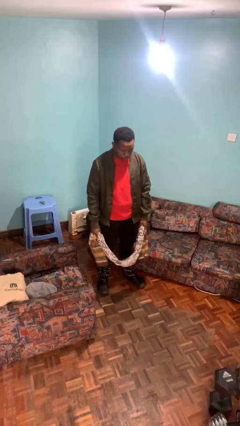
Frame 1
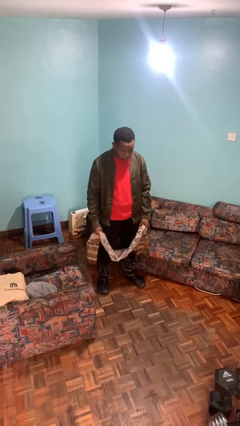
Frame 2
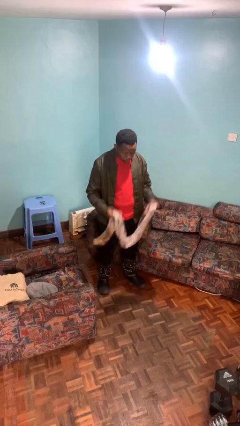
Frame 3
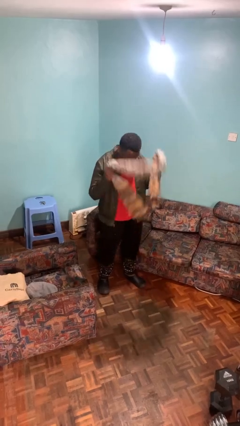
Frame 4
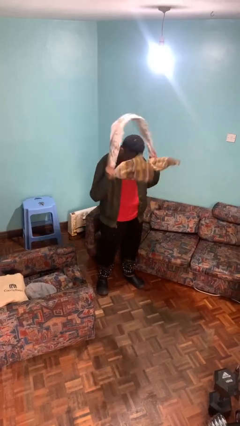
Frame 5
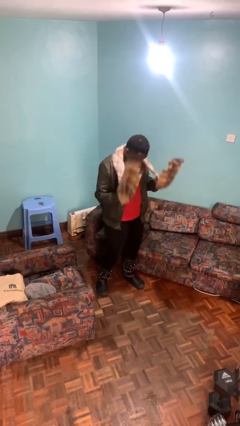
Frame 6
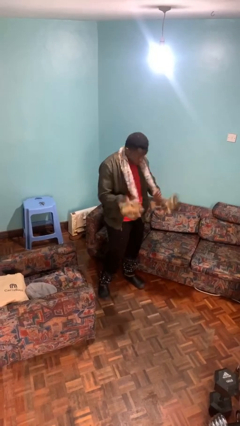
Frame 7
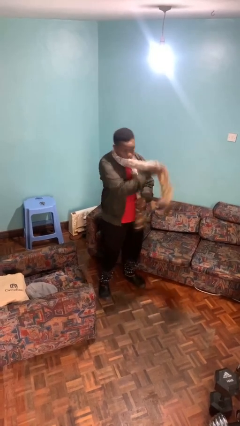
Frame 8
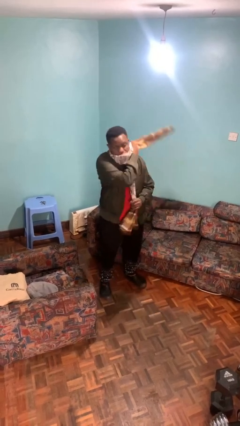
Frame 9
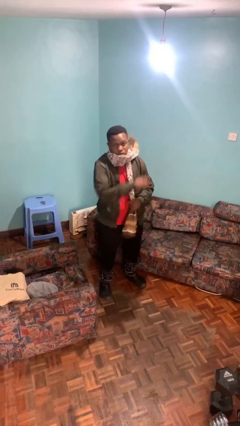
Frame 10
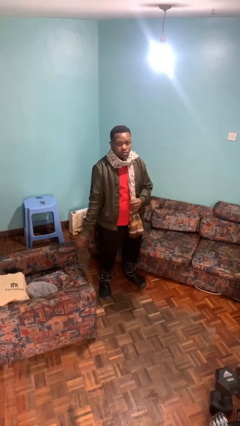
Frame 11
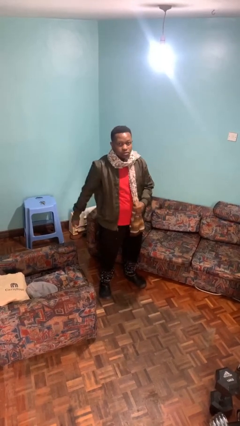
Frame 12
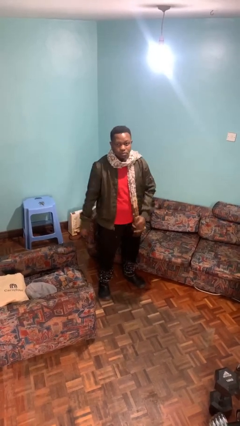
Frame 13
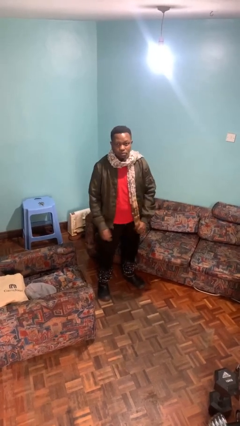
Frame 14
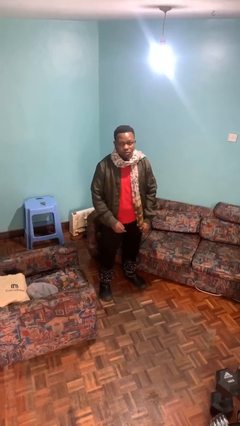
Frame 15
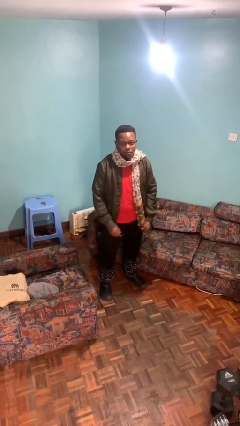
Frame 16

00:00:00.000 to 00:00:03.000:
person puts on scarf

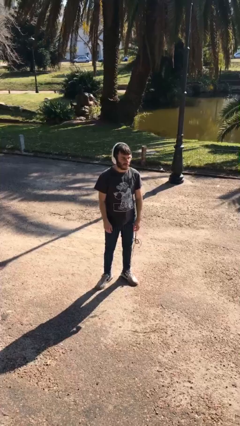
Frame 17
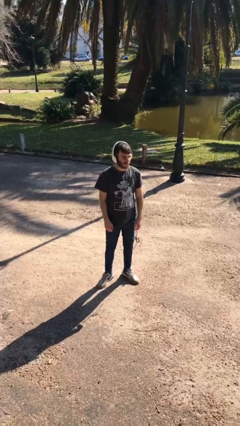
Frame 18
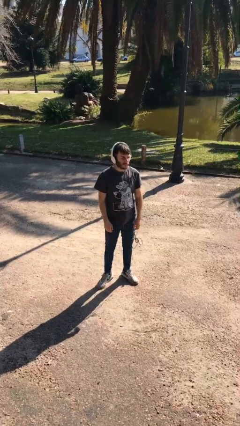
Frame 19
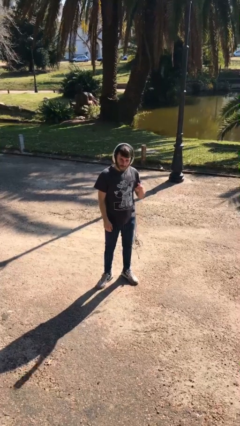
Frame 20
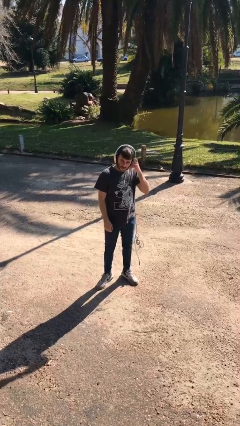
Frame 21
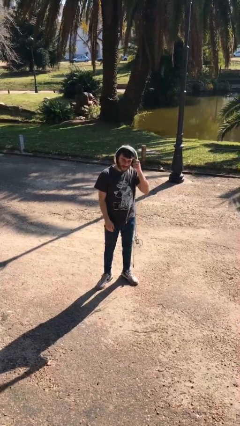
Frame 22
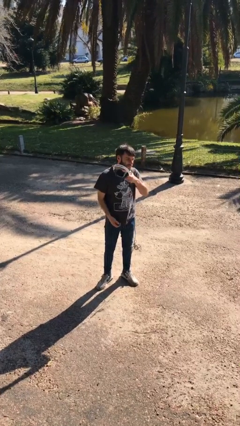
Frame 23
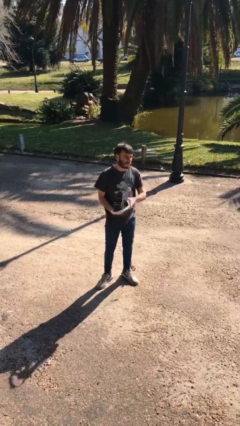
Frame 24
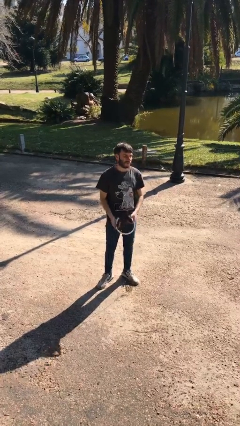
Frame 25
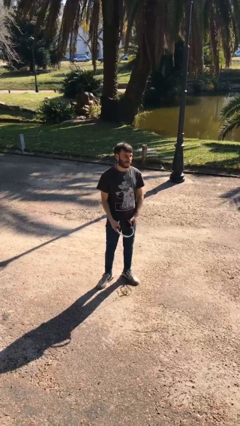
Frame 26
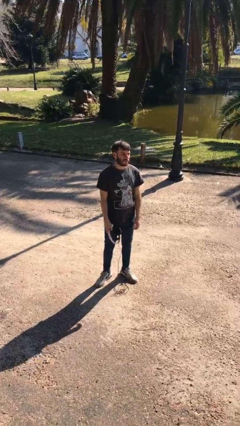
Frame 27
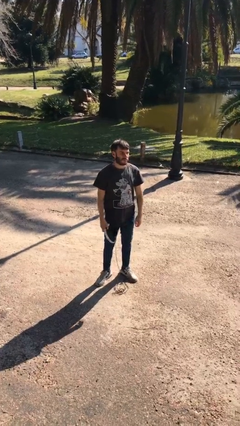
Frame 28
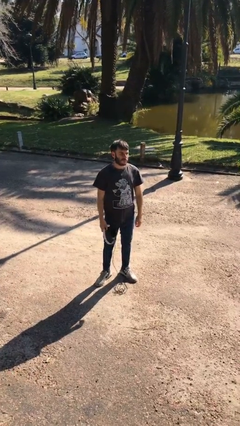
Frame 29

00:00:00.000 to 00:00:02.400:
person takes off headphones

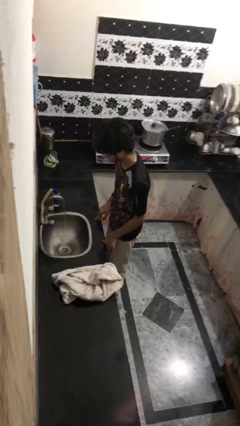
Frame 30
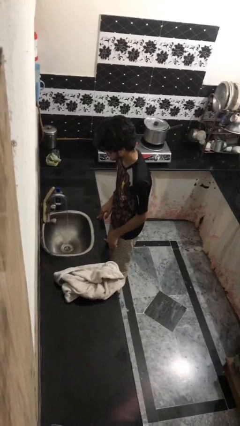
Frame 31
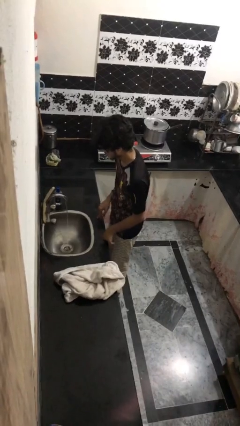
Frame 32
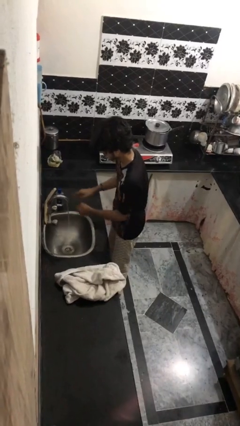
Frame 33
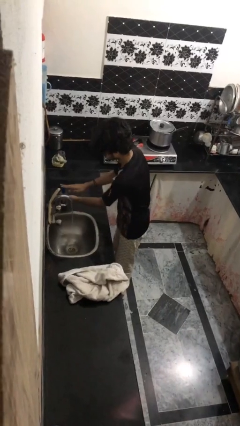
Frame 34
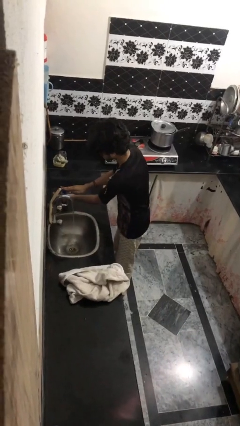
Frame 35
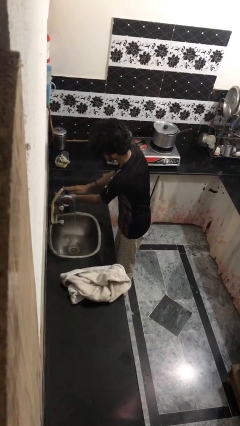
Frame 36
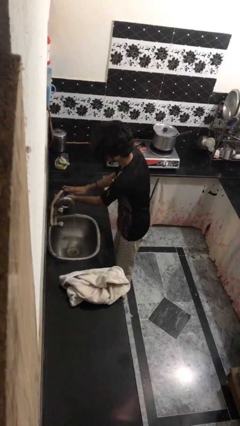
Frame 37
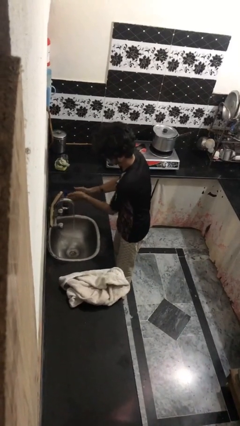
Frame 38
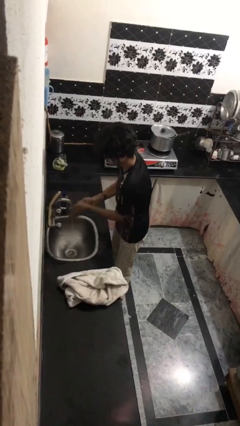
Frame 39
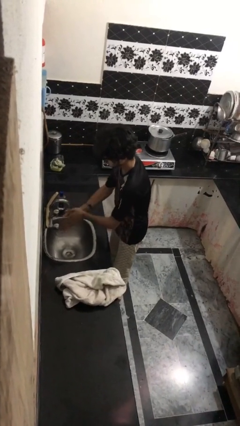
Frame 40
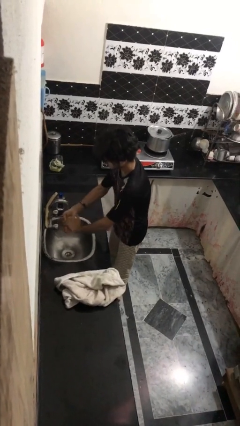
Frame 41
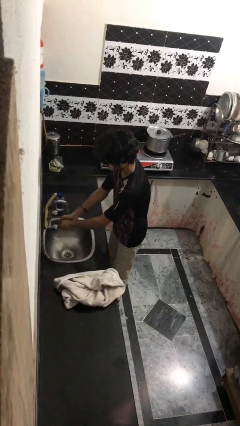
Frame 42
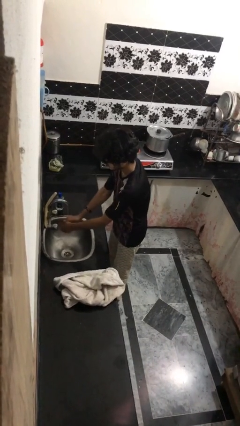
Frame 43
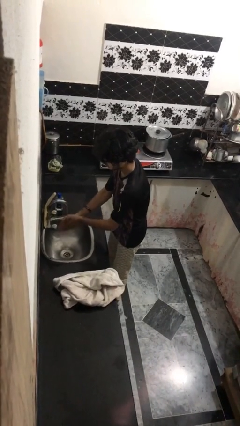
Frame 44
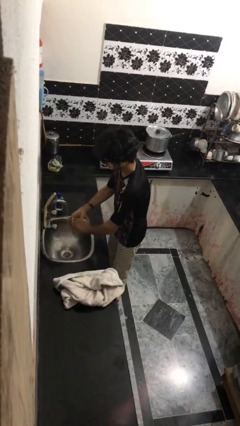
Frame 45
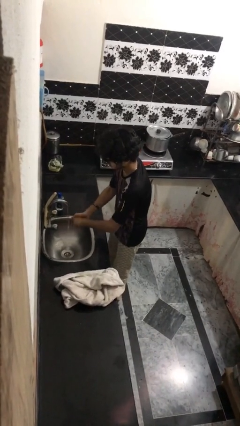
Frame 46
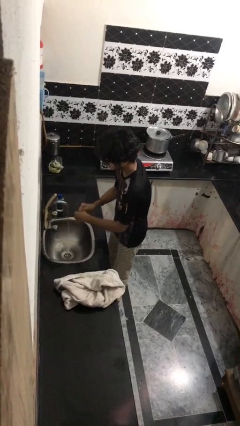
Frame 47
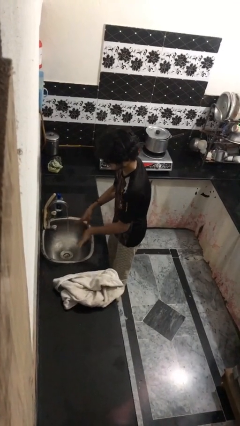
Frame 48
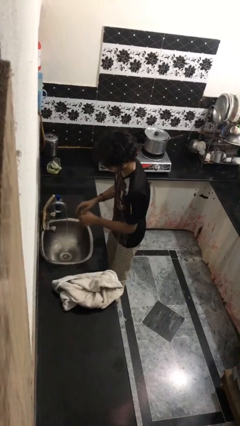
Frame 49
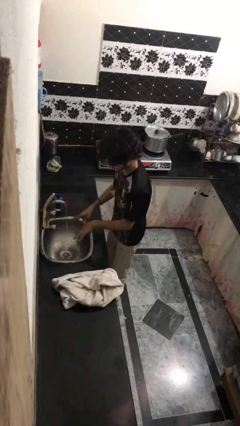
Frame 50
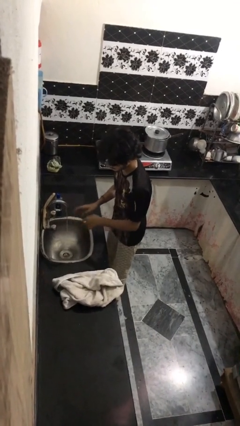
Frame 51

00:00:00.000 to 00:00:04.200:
person washes hands

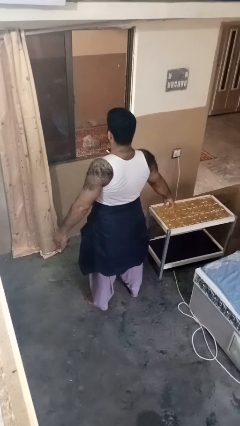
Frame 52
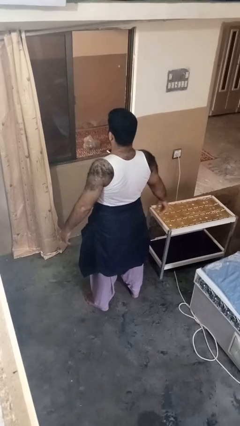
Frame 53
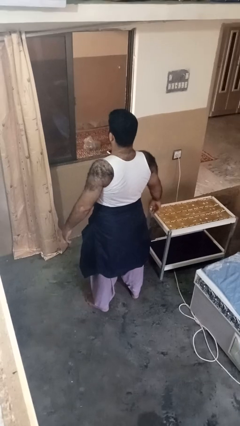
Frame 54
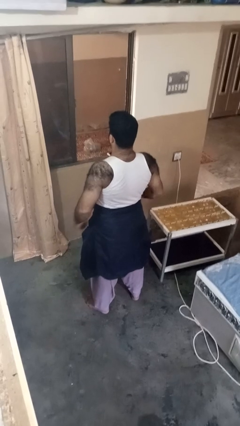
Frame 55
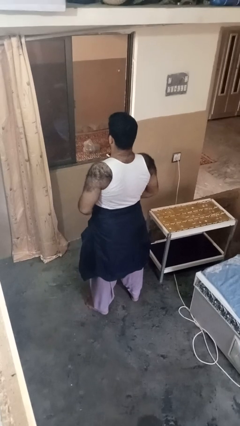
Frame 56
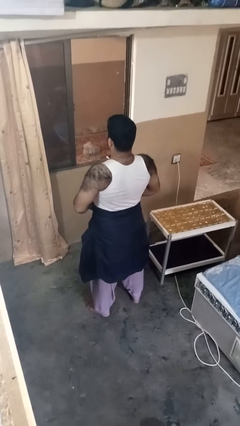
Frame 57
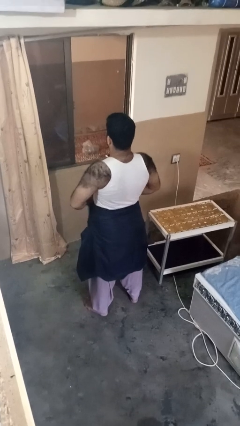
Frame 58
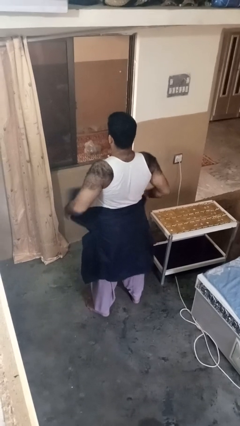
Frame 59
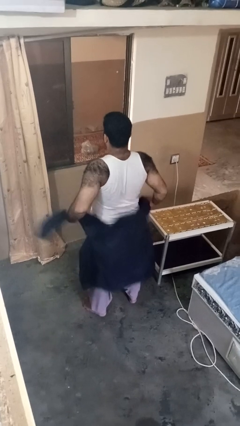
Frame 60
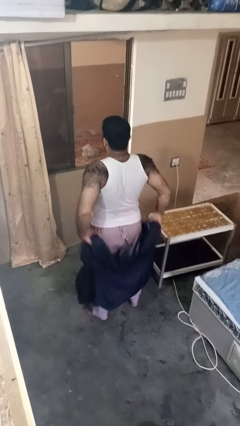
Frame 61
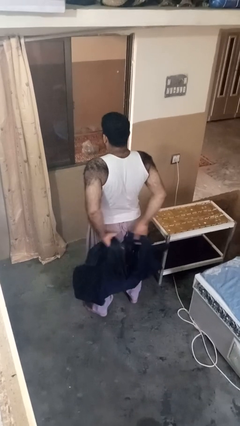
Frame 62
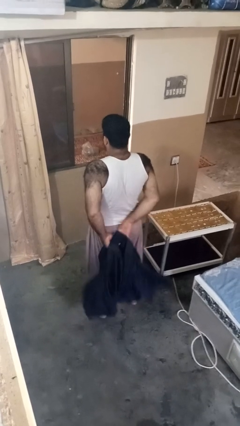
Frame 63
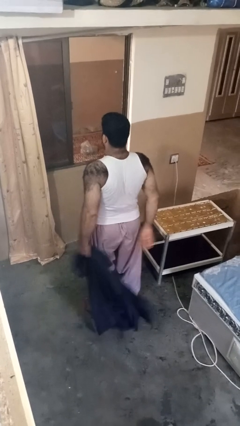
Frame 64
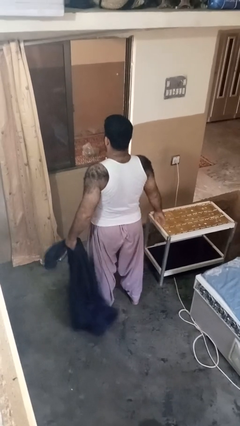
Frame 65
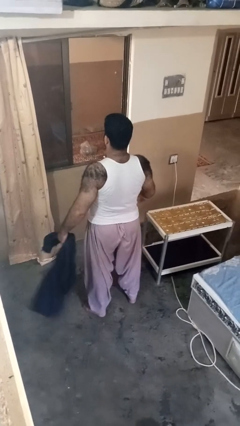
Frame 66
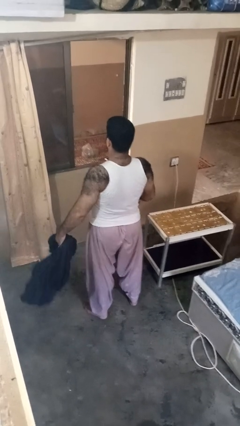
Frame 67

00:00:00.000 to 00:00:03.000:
person unties jacket around waist

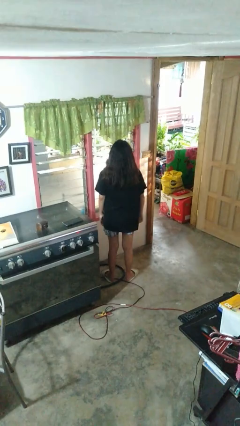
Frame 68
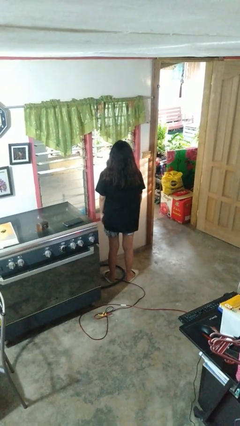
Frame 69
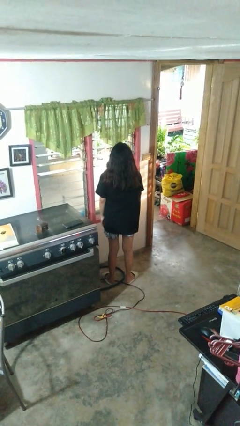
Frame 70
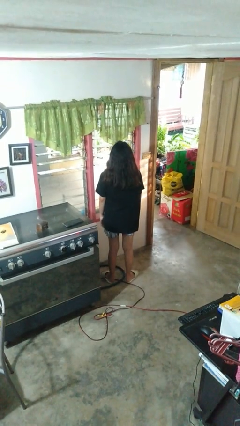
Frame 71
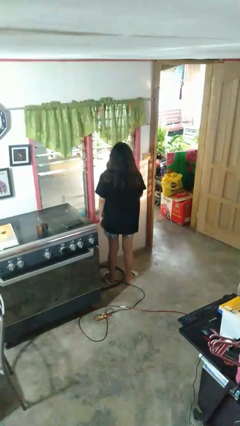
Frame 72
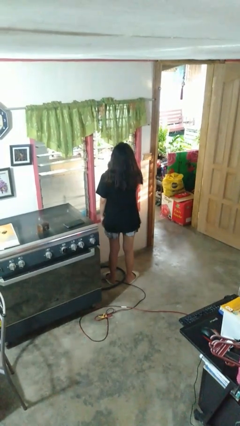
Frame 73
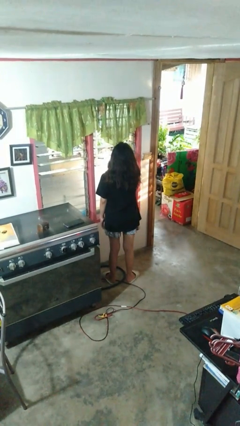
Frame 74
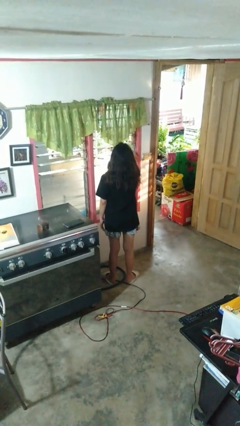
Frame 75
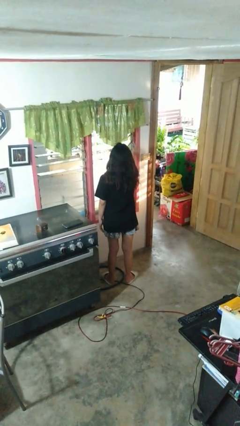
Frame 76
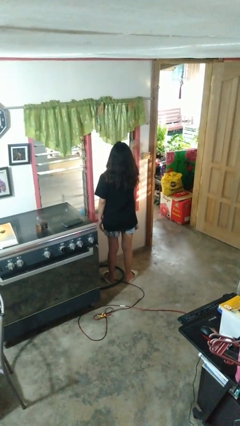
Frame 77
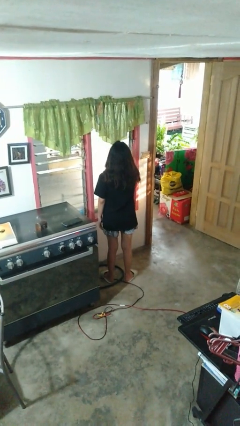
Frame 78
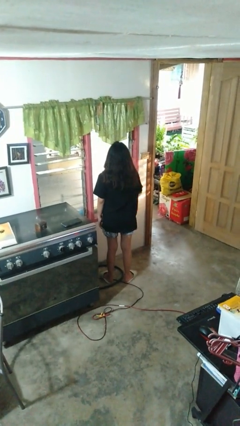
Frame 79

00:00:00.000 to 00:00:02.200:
person closes home window

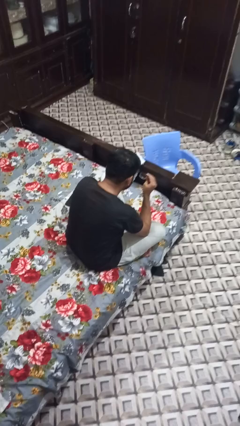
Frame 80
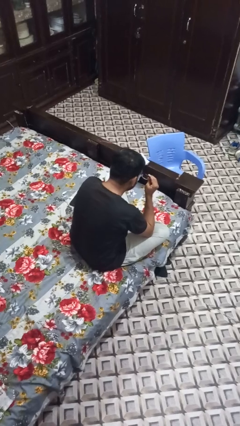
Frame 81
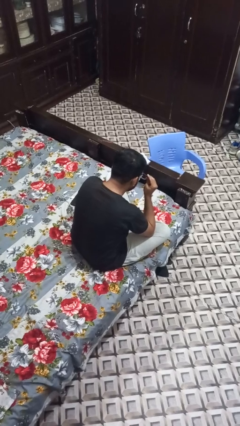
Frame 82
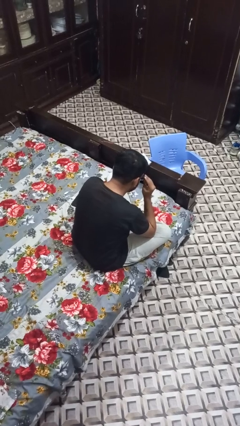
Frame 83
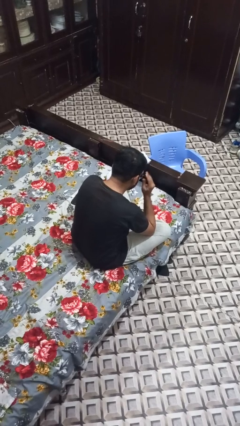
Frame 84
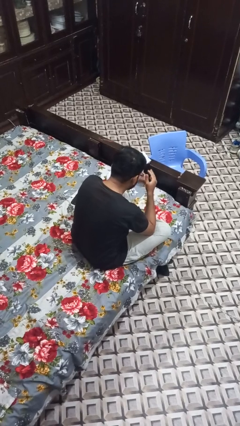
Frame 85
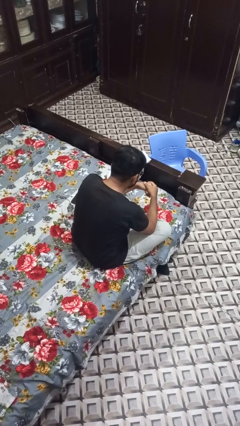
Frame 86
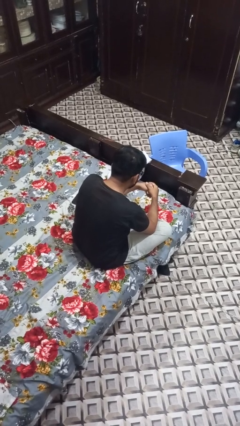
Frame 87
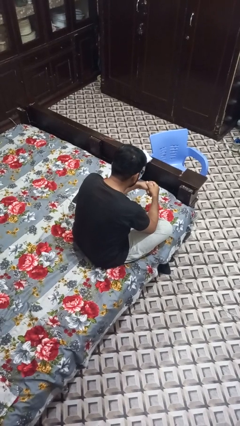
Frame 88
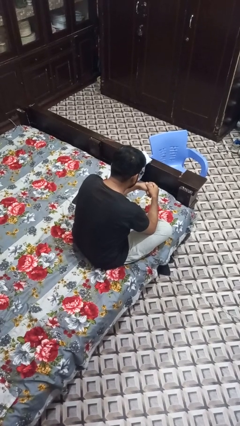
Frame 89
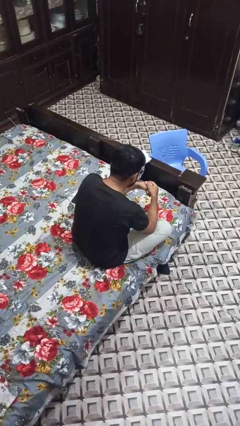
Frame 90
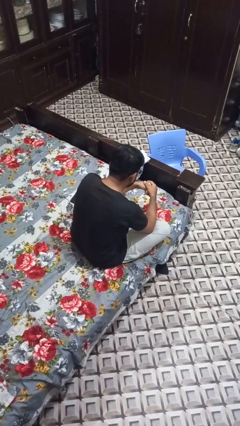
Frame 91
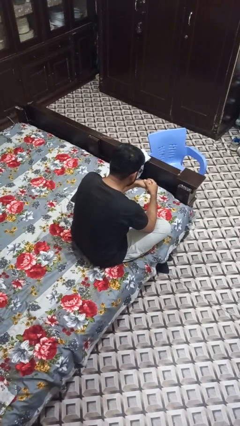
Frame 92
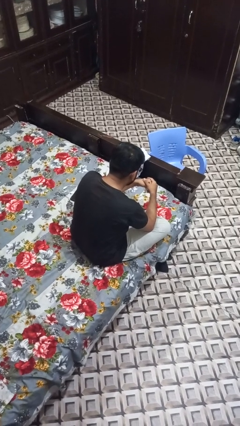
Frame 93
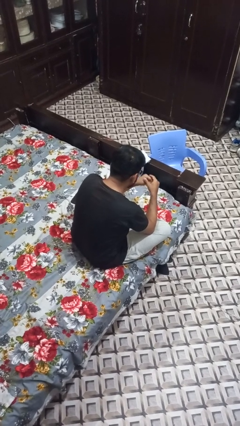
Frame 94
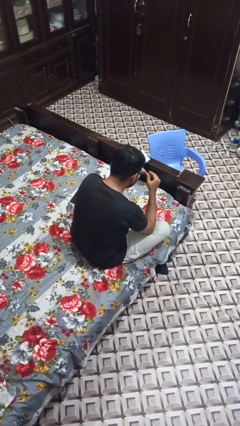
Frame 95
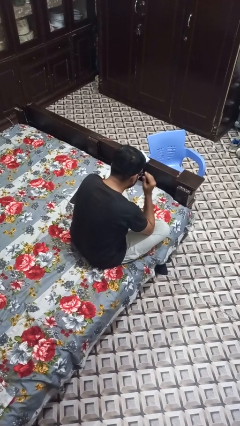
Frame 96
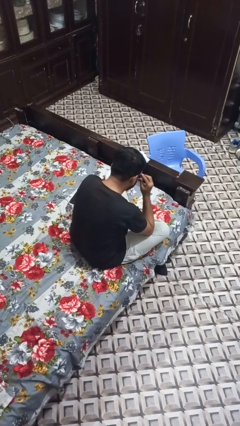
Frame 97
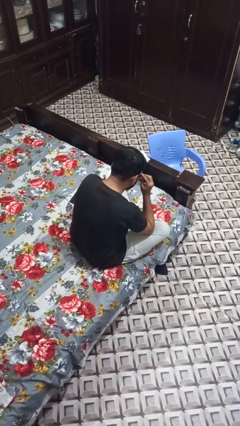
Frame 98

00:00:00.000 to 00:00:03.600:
person puts on glasses
